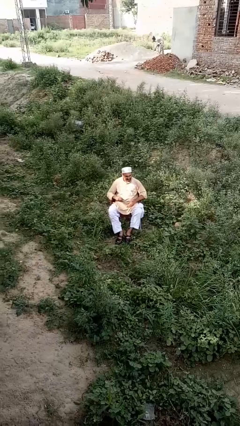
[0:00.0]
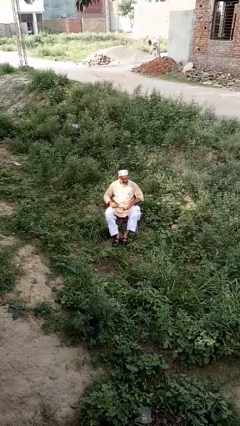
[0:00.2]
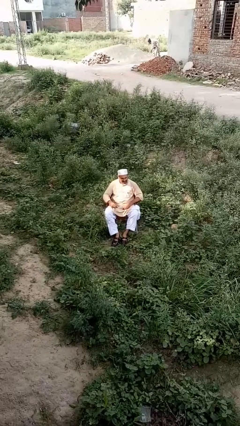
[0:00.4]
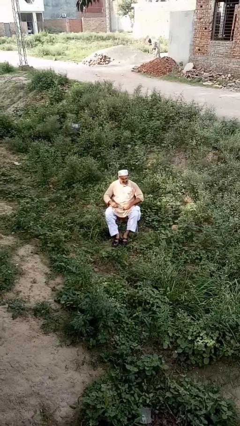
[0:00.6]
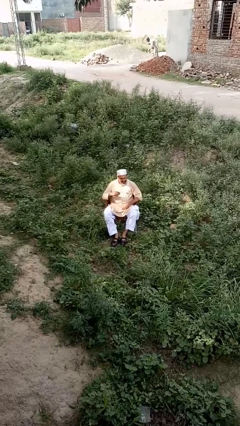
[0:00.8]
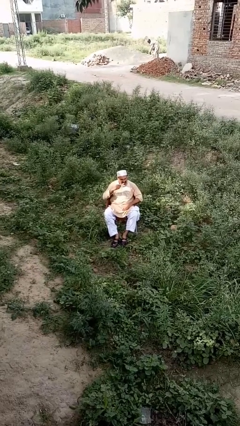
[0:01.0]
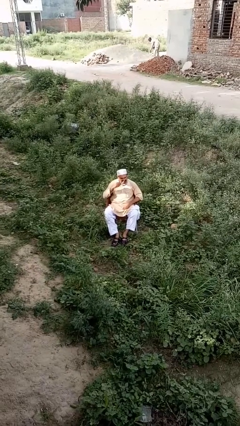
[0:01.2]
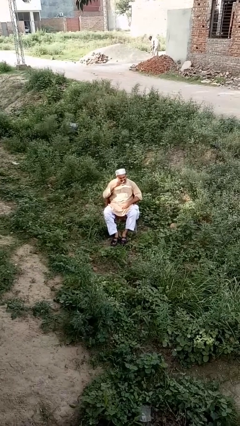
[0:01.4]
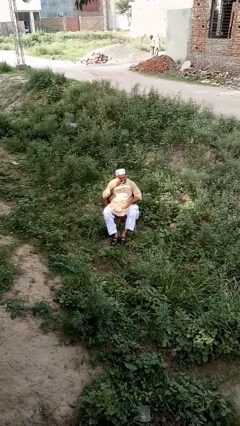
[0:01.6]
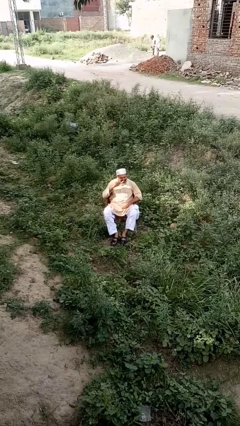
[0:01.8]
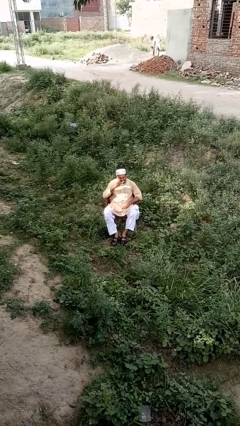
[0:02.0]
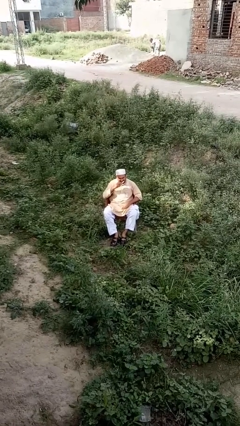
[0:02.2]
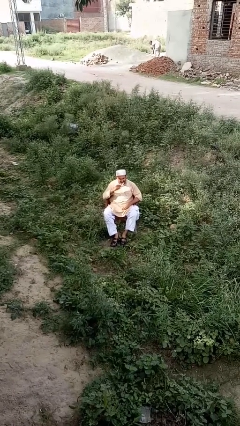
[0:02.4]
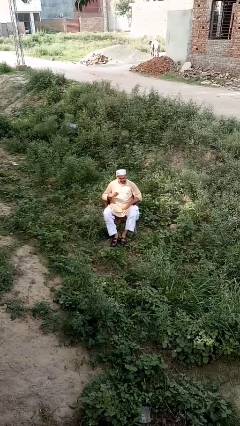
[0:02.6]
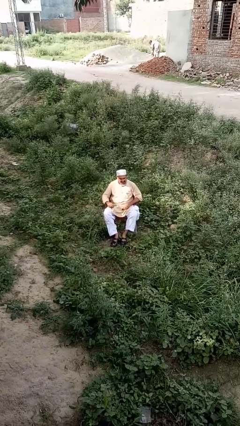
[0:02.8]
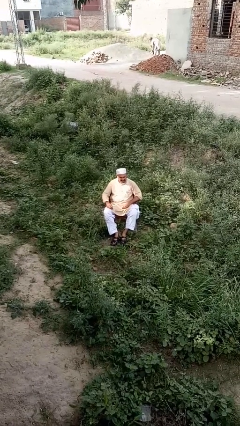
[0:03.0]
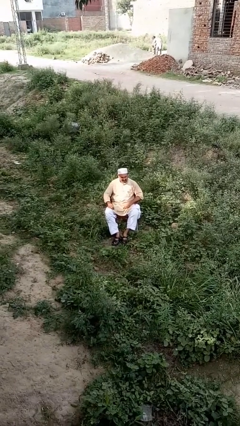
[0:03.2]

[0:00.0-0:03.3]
person brushes teeth

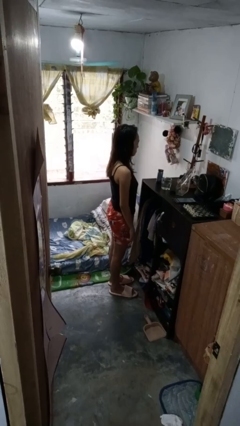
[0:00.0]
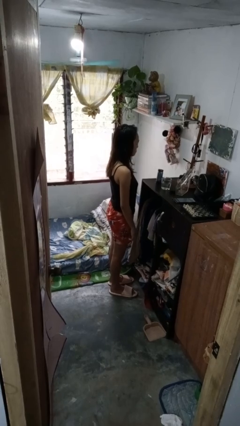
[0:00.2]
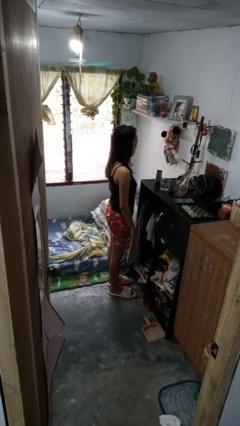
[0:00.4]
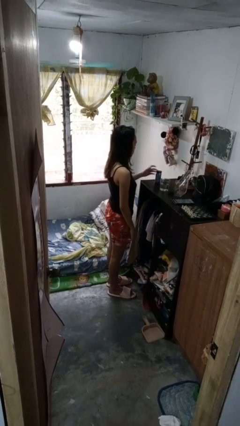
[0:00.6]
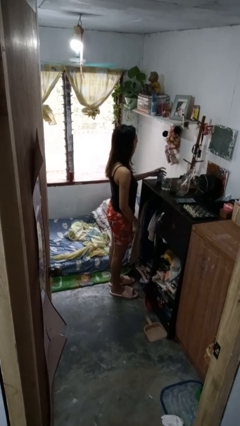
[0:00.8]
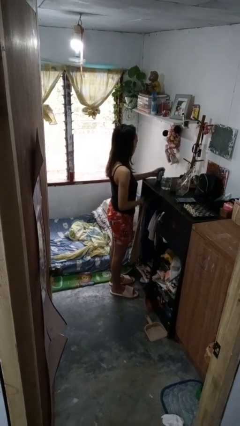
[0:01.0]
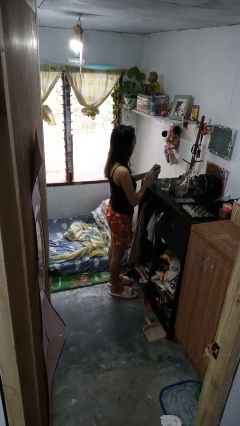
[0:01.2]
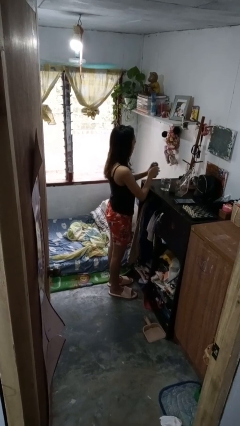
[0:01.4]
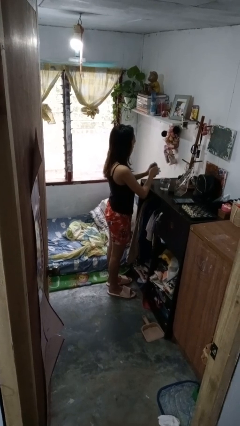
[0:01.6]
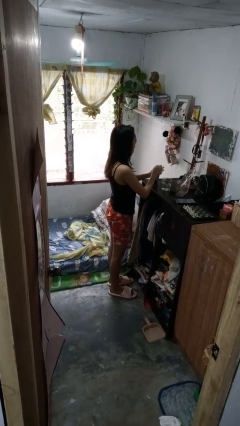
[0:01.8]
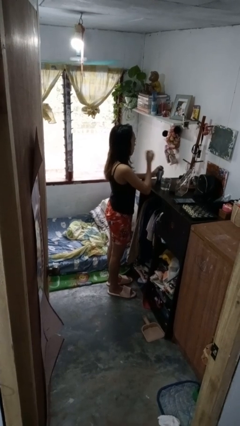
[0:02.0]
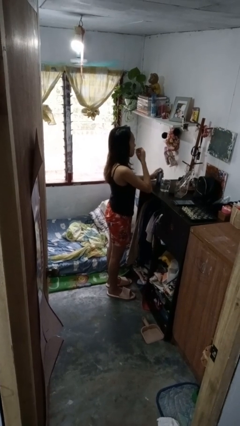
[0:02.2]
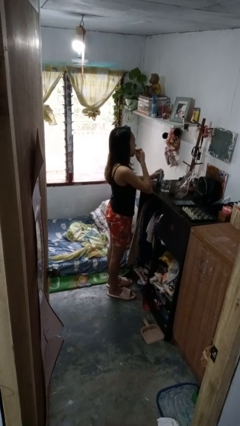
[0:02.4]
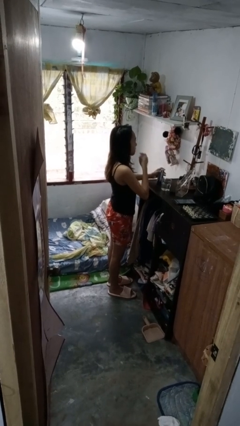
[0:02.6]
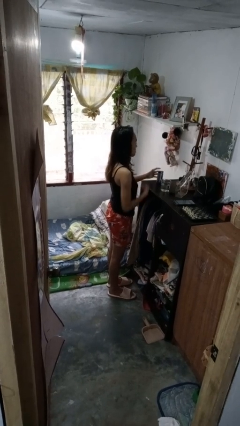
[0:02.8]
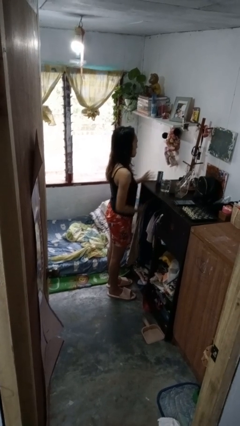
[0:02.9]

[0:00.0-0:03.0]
person takes medicine pills

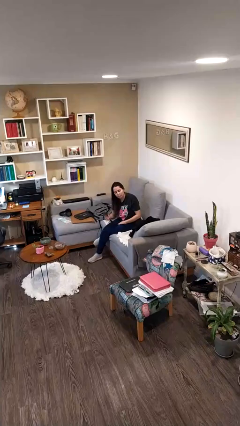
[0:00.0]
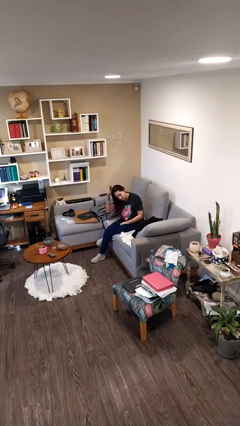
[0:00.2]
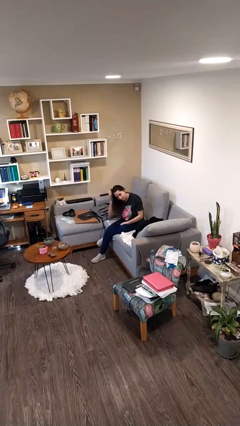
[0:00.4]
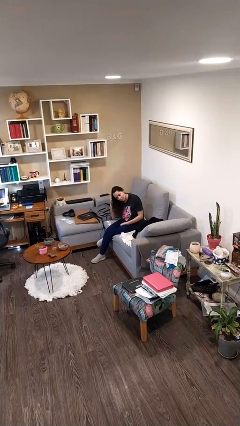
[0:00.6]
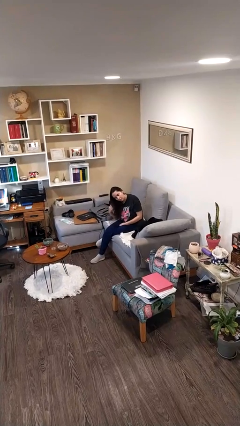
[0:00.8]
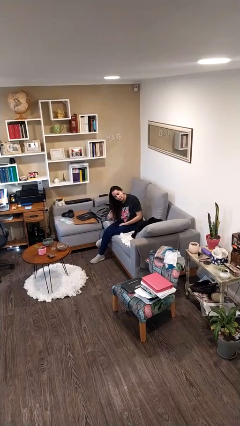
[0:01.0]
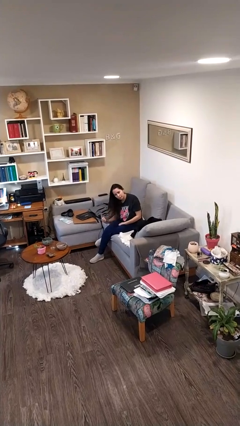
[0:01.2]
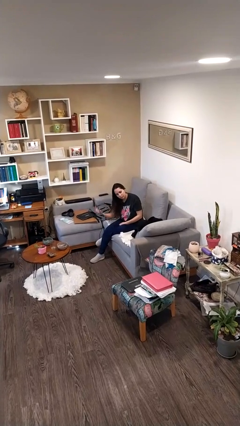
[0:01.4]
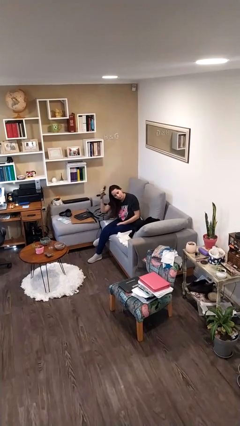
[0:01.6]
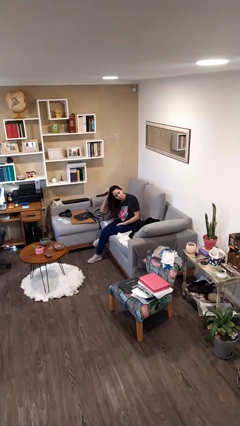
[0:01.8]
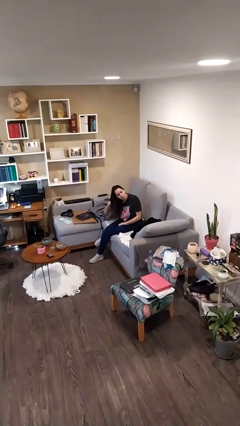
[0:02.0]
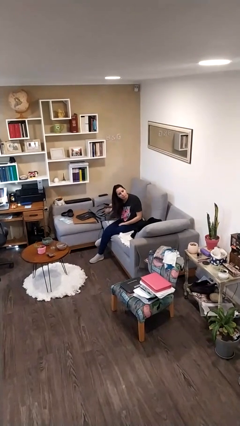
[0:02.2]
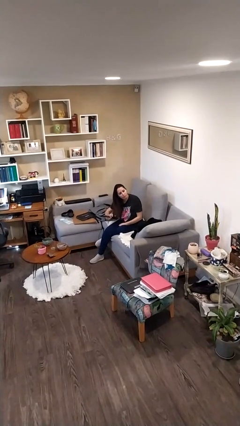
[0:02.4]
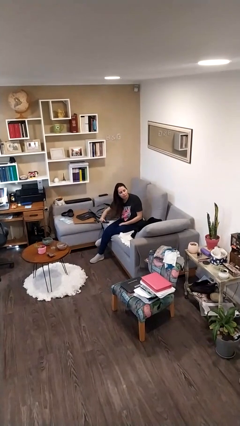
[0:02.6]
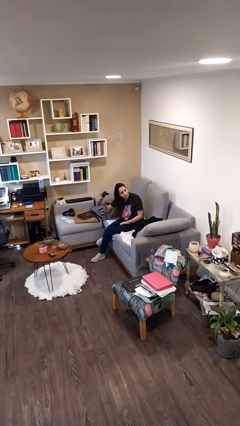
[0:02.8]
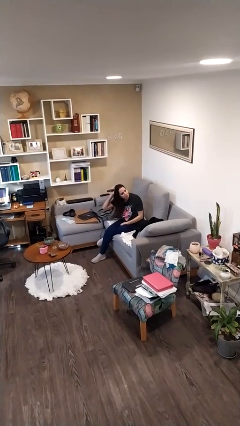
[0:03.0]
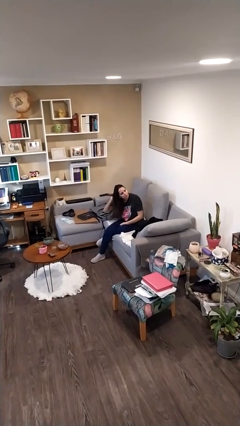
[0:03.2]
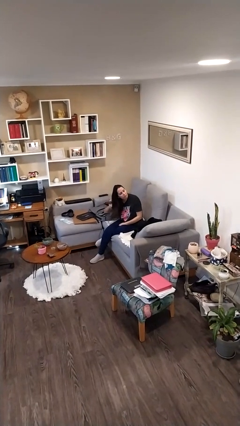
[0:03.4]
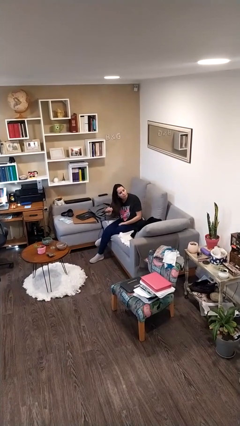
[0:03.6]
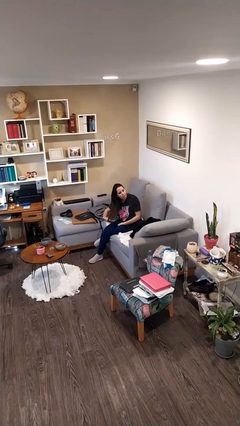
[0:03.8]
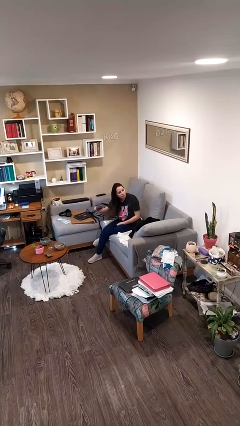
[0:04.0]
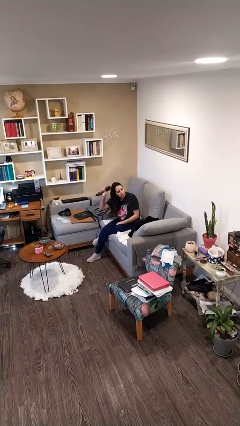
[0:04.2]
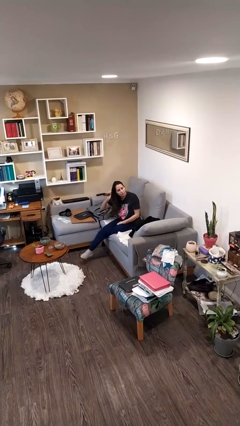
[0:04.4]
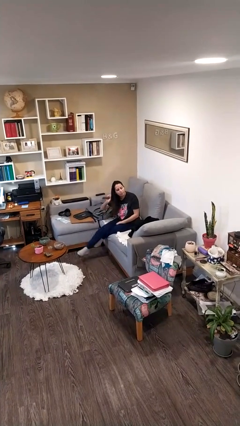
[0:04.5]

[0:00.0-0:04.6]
person brushes hair

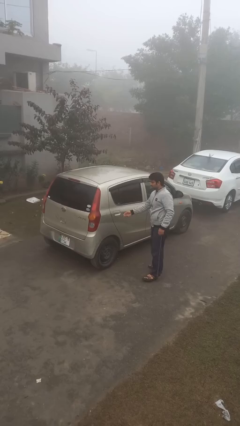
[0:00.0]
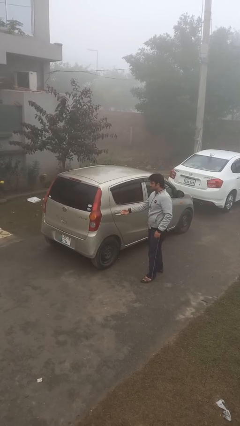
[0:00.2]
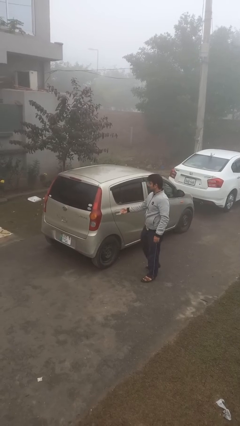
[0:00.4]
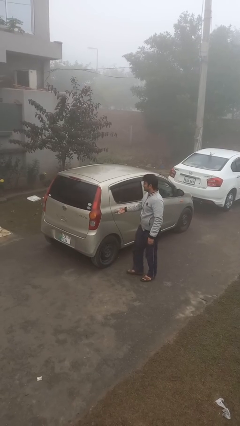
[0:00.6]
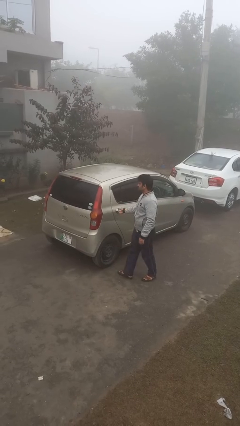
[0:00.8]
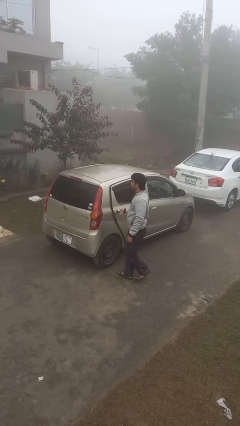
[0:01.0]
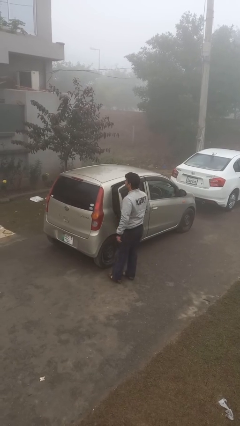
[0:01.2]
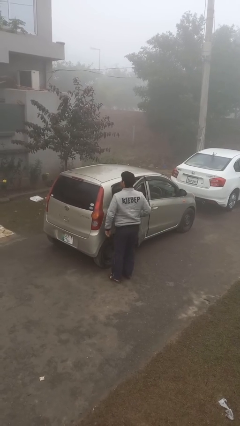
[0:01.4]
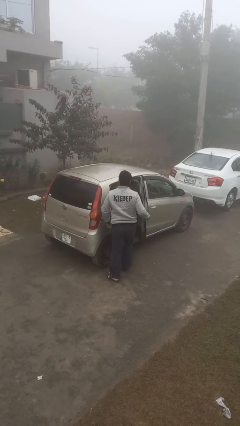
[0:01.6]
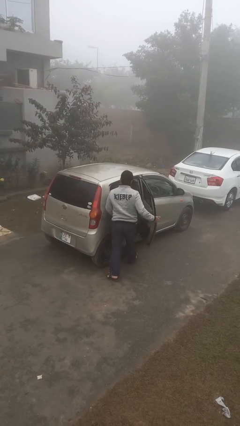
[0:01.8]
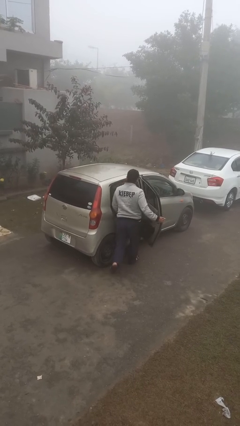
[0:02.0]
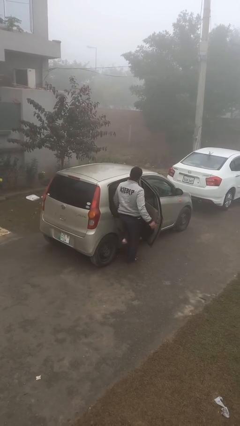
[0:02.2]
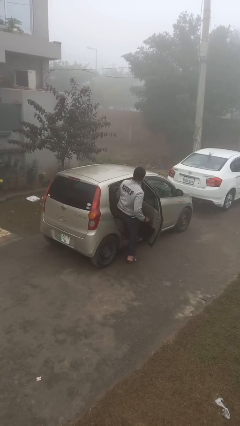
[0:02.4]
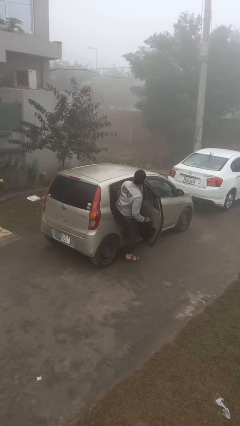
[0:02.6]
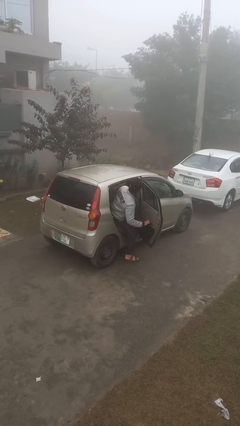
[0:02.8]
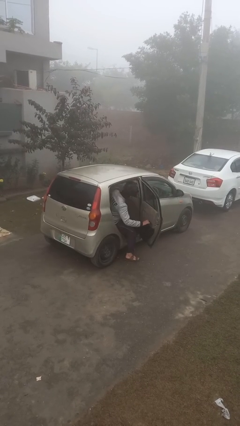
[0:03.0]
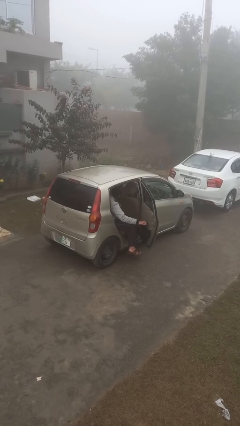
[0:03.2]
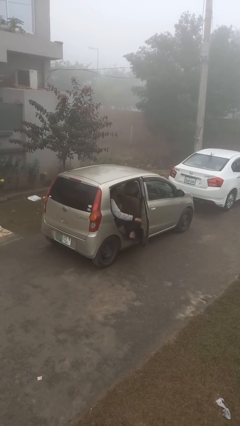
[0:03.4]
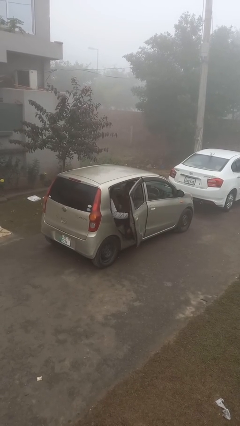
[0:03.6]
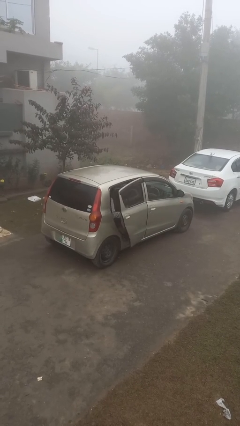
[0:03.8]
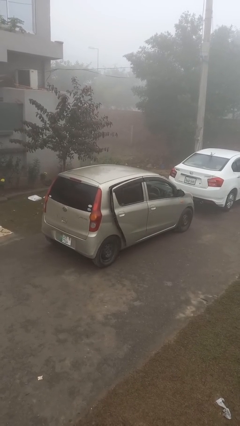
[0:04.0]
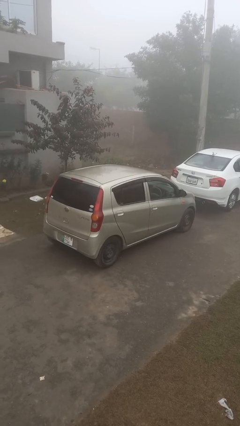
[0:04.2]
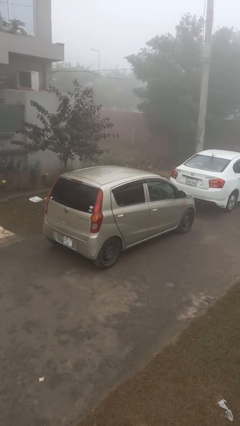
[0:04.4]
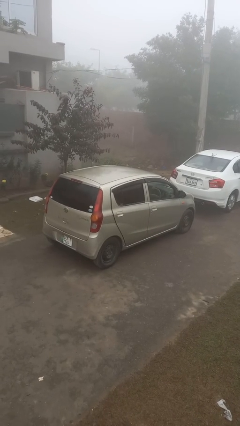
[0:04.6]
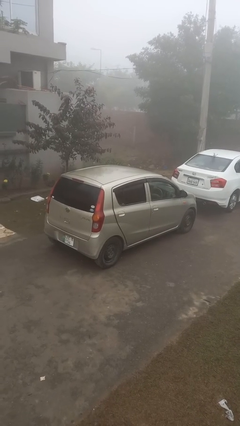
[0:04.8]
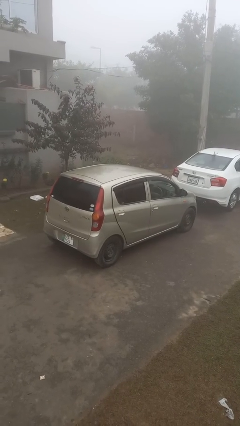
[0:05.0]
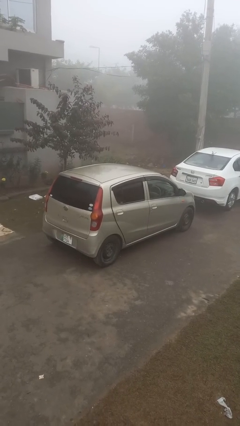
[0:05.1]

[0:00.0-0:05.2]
car picks up person

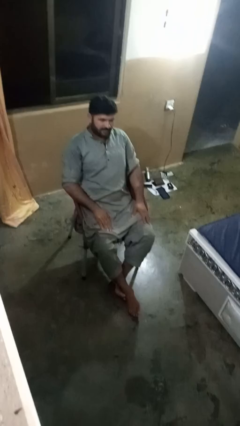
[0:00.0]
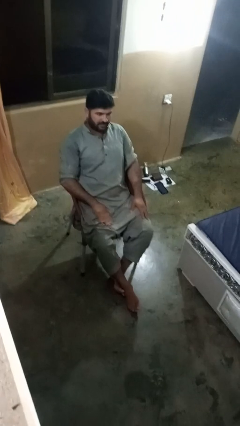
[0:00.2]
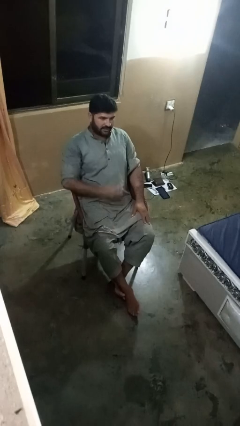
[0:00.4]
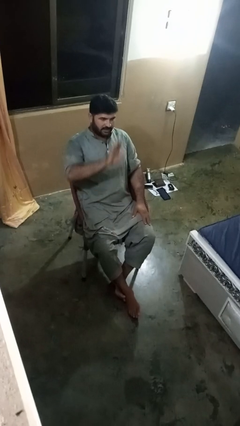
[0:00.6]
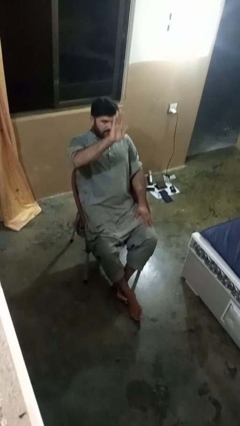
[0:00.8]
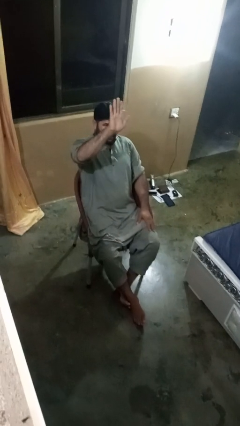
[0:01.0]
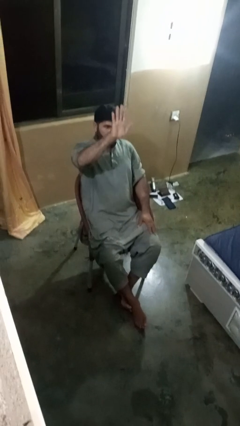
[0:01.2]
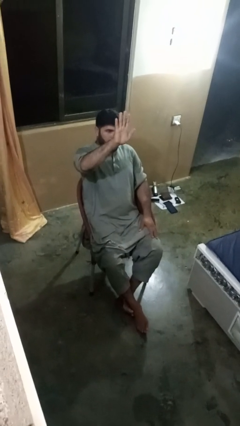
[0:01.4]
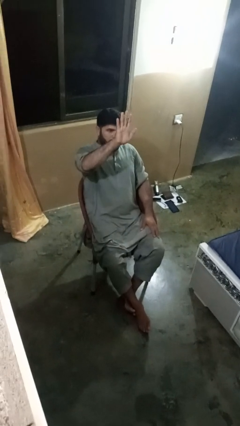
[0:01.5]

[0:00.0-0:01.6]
person gestures number five
